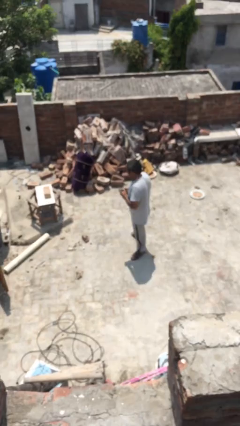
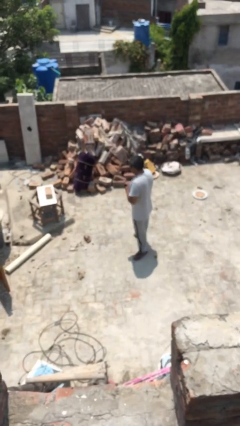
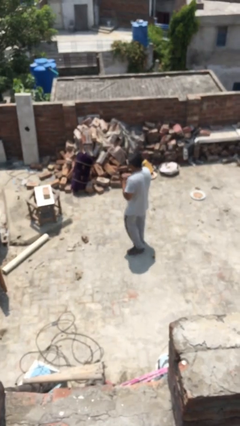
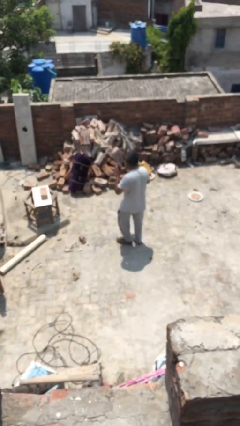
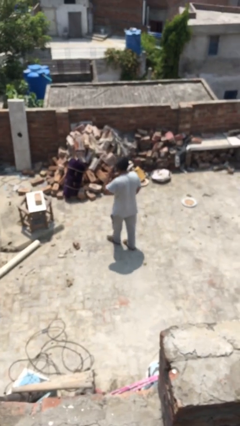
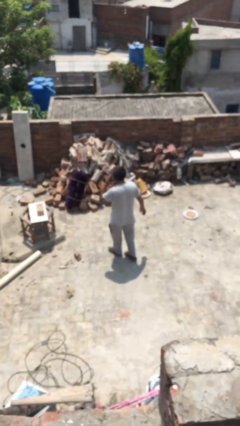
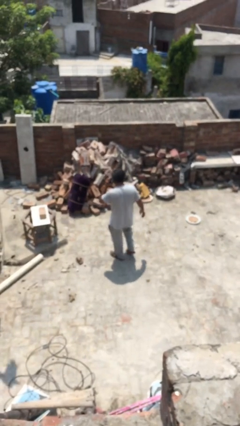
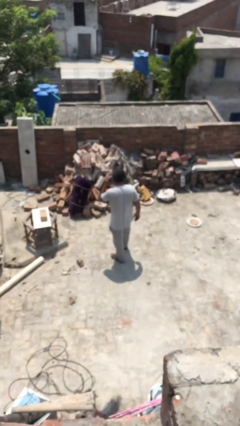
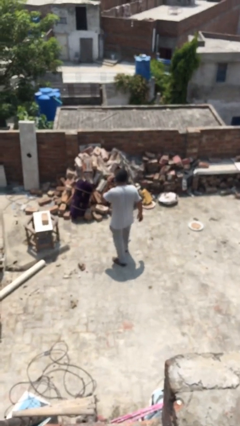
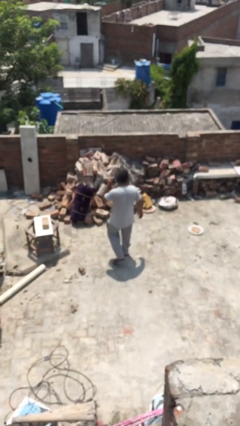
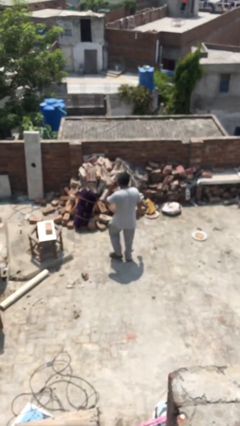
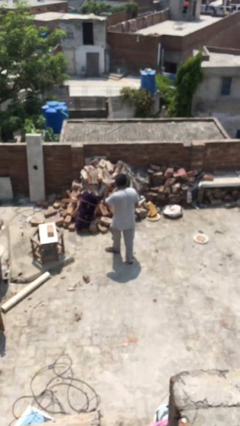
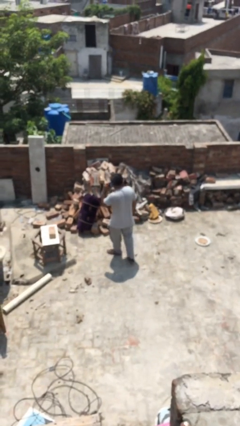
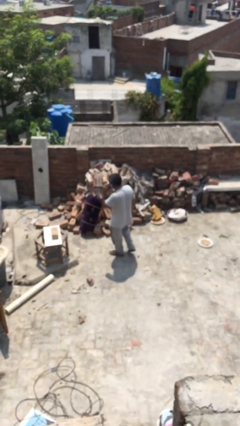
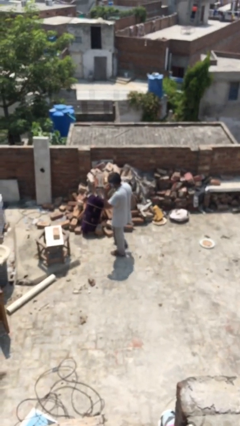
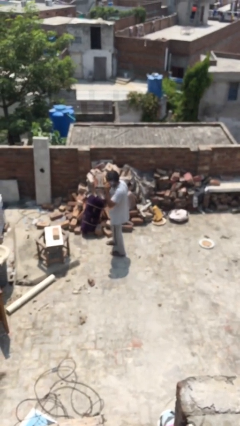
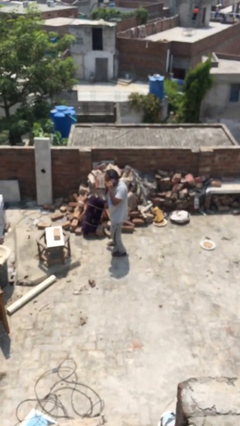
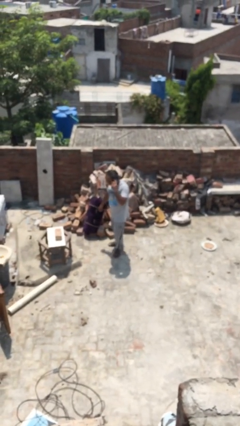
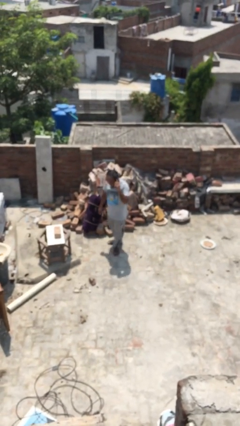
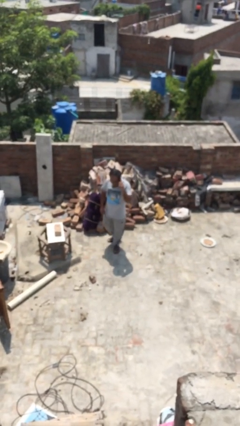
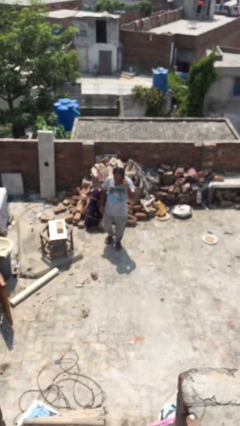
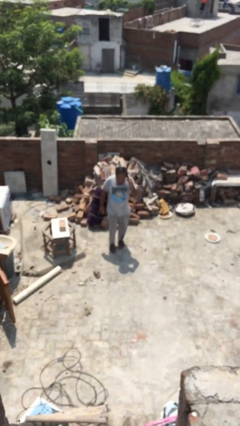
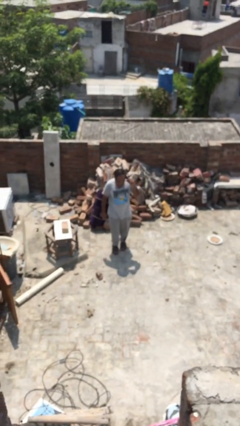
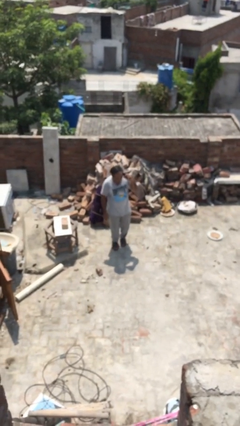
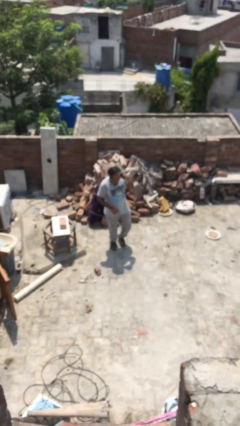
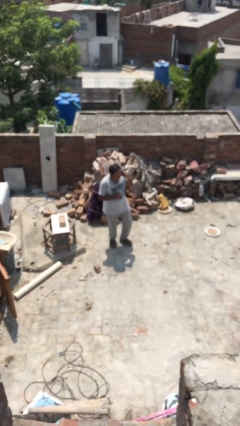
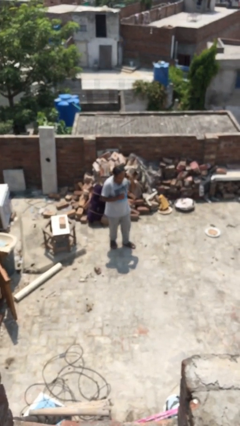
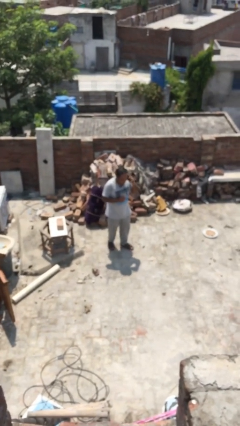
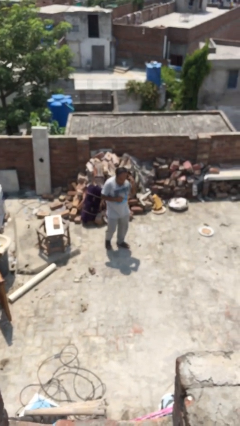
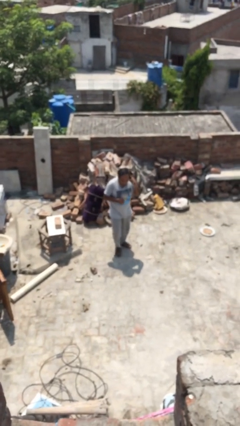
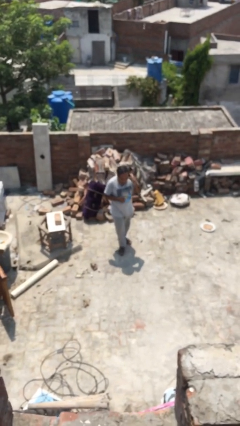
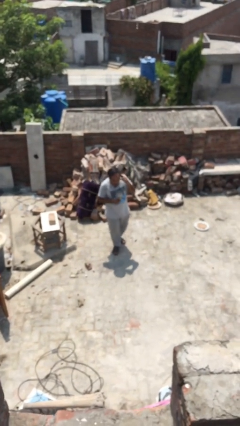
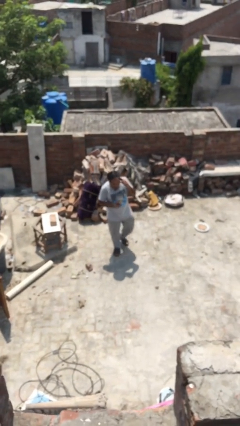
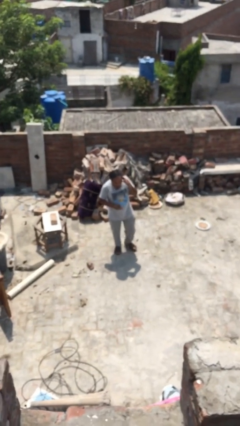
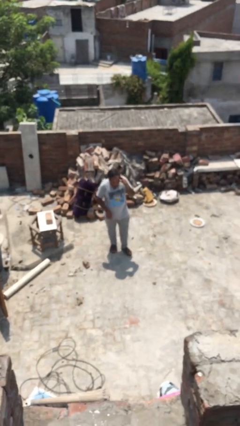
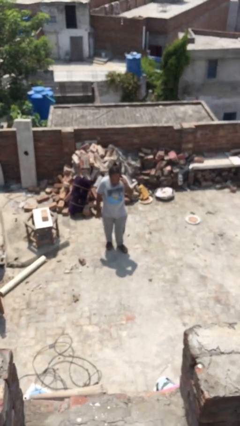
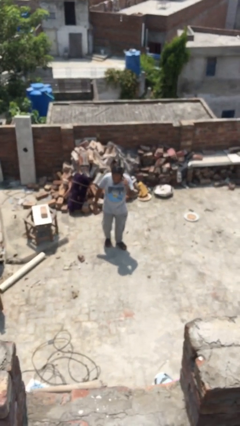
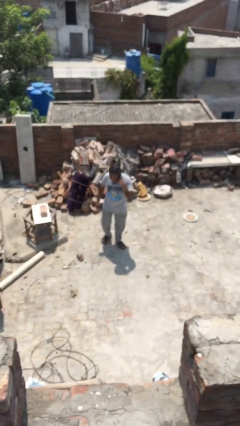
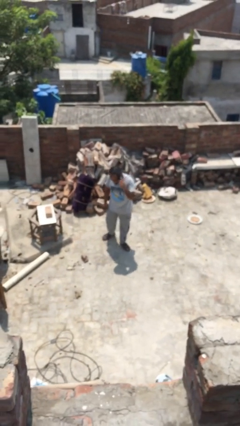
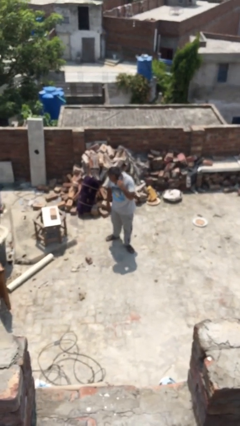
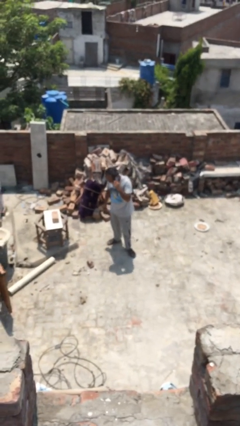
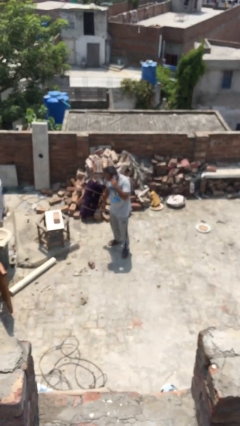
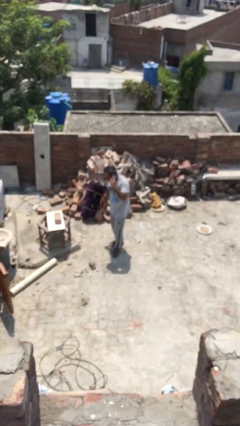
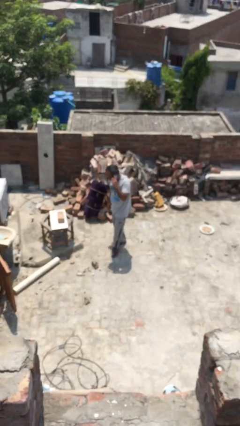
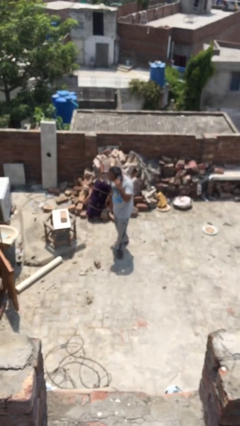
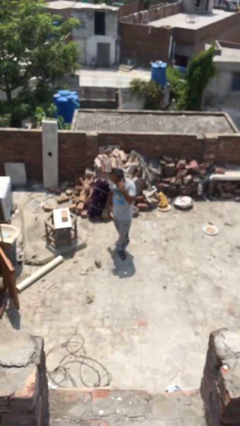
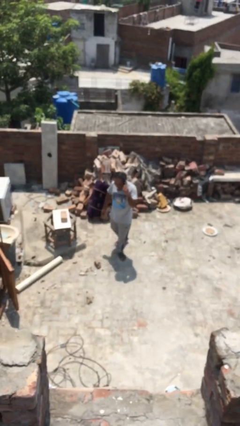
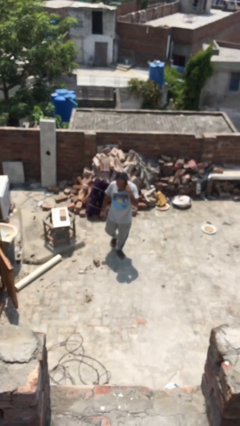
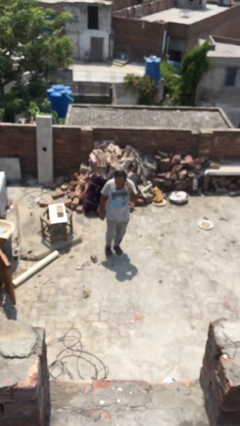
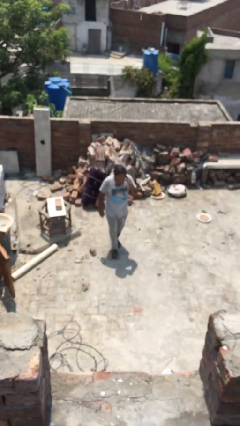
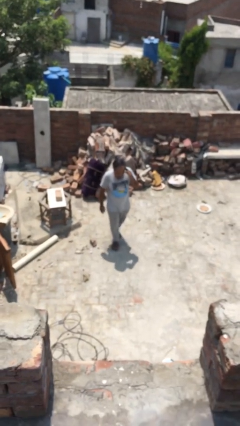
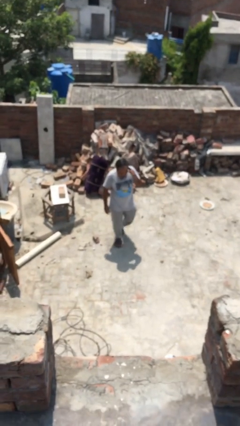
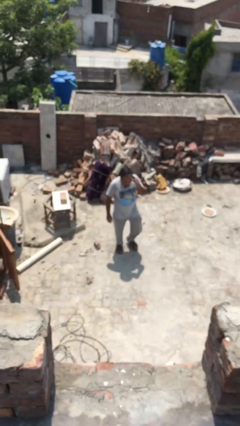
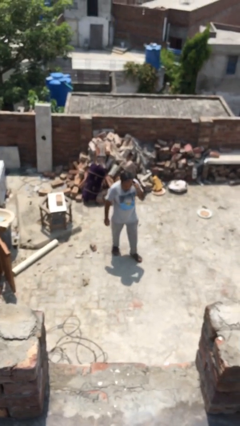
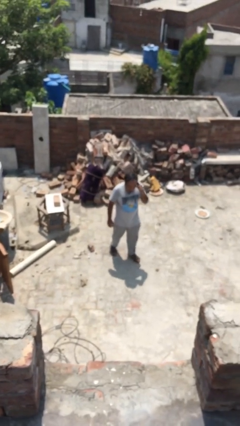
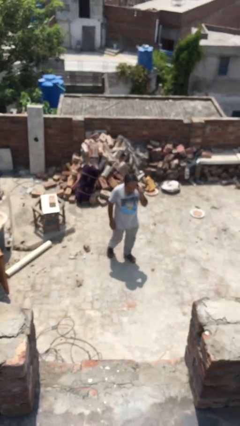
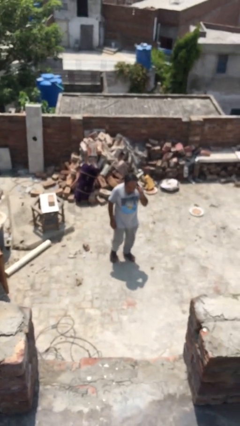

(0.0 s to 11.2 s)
person talks on phone

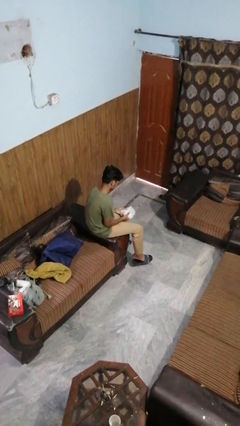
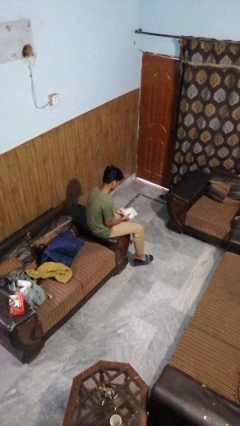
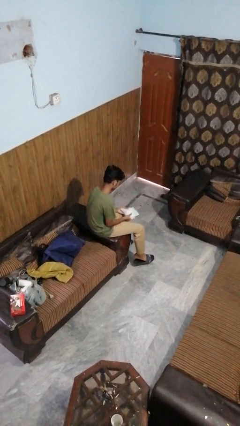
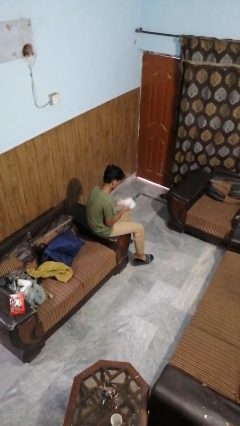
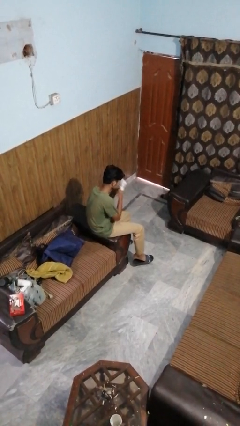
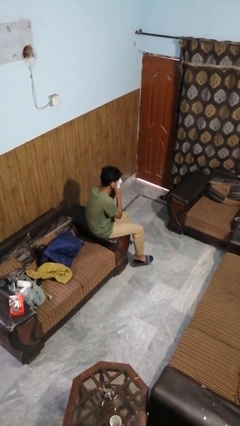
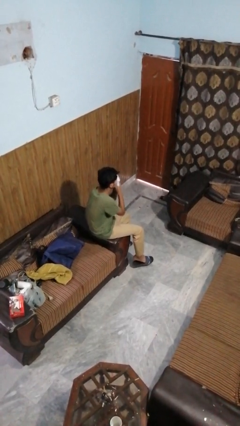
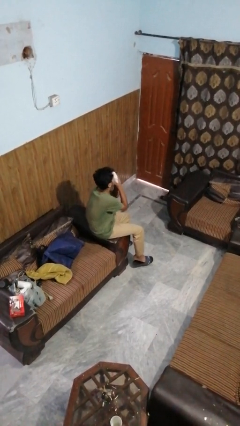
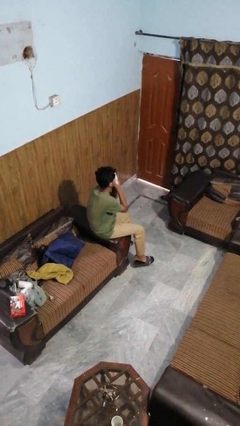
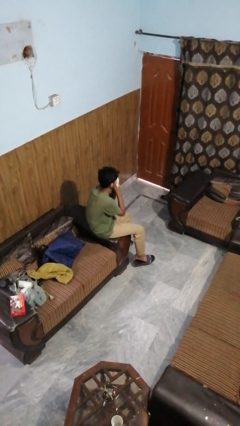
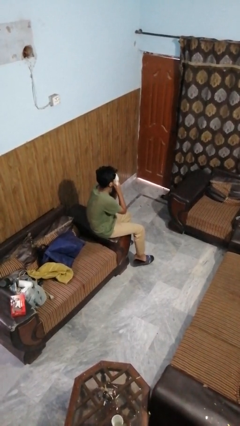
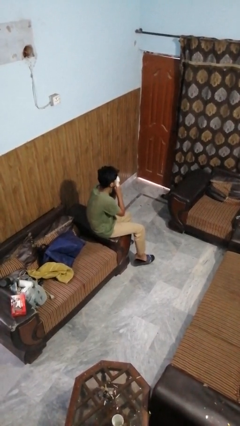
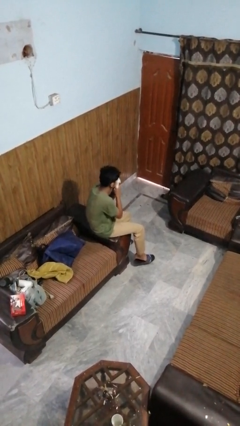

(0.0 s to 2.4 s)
person blows nose

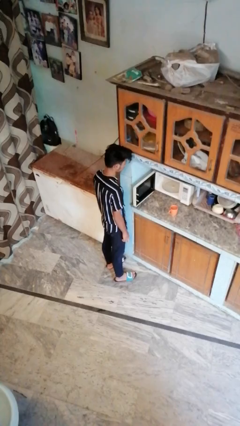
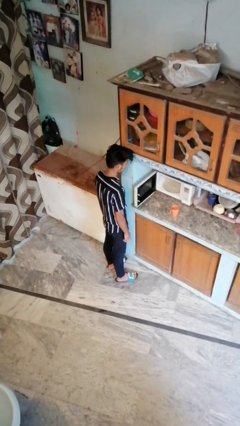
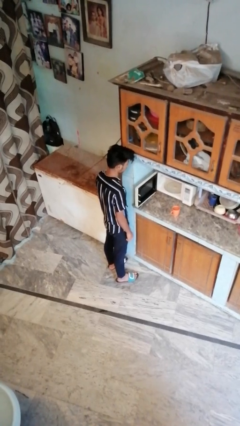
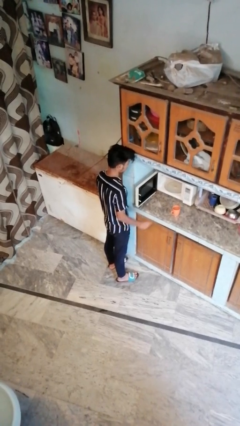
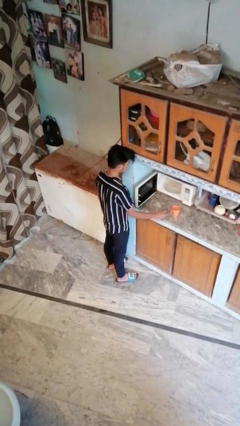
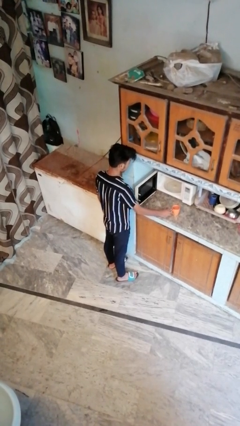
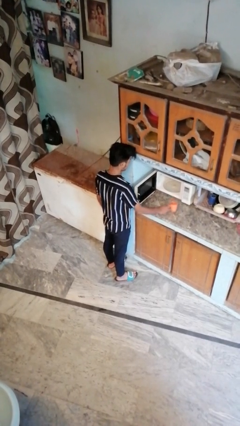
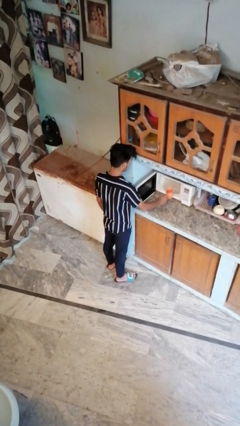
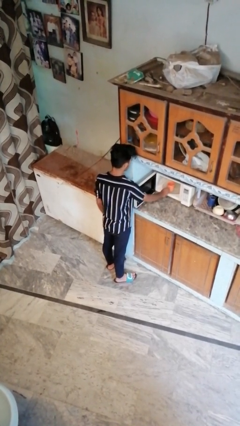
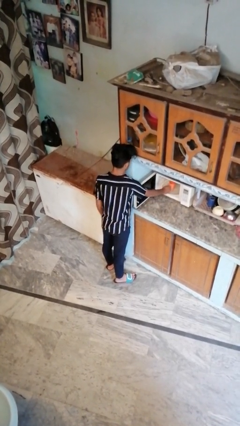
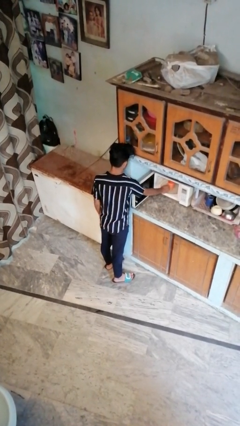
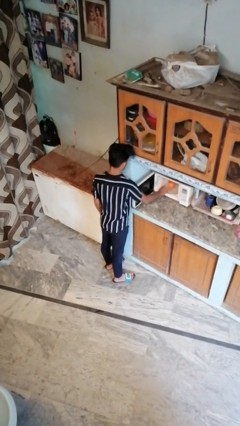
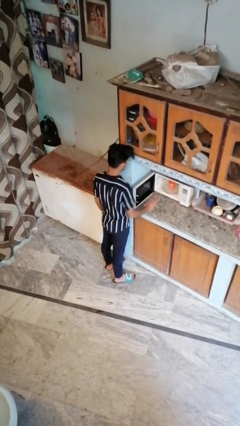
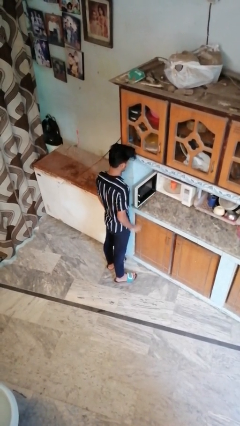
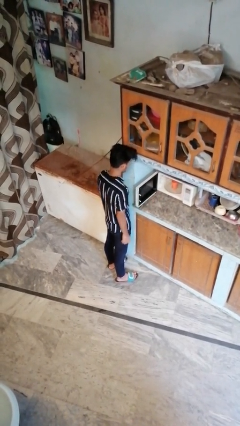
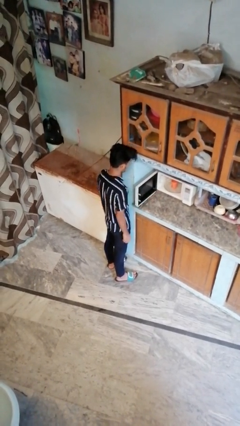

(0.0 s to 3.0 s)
person puts object into microwave

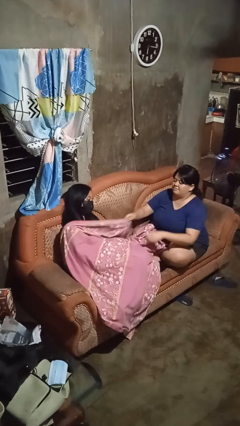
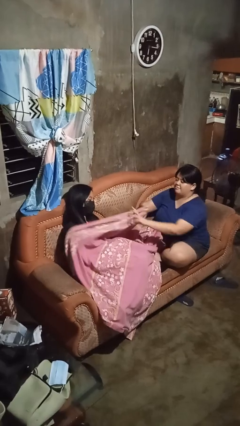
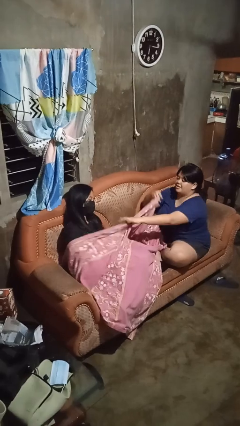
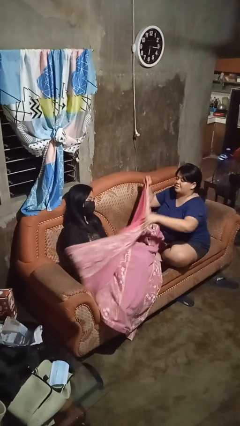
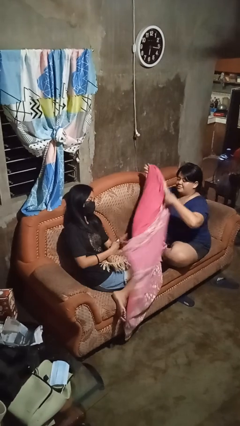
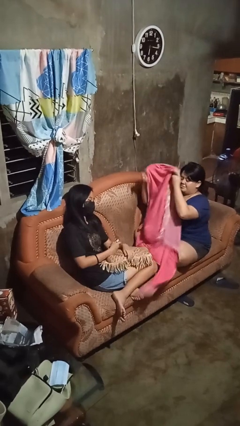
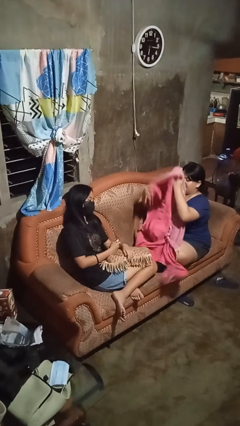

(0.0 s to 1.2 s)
person uncovers friend with blanket
